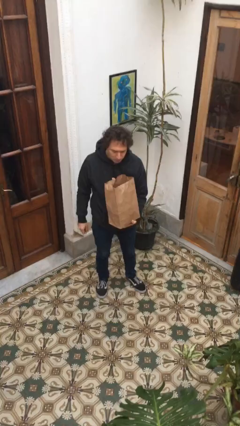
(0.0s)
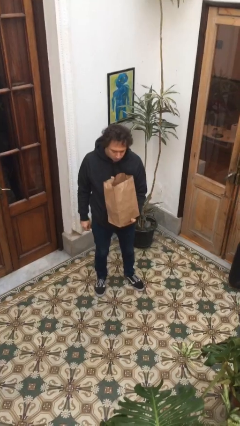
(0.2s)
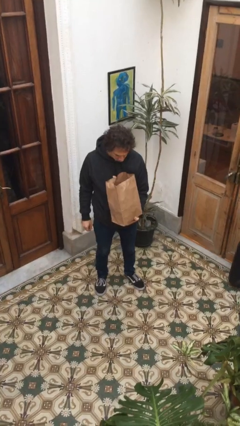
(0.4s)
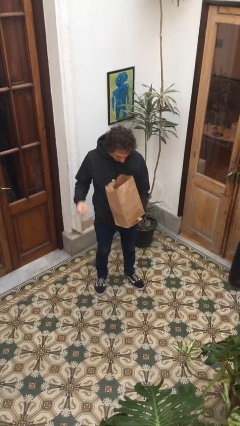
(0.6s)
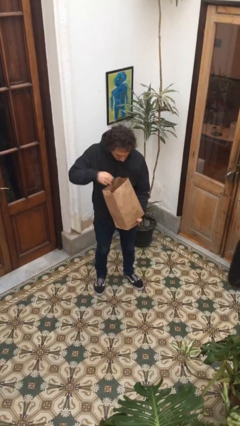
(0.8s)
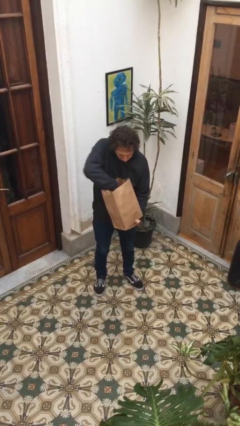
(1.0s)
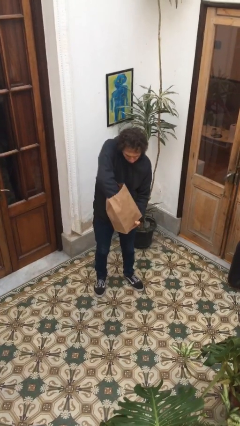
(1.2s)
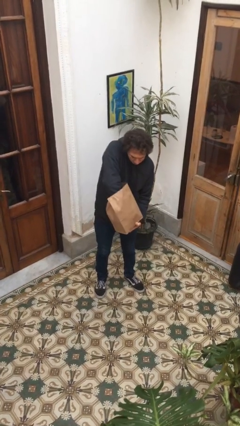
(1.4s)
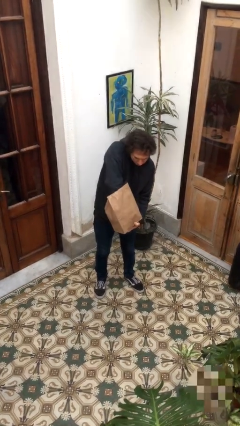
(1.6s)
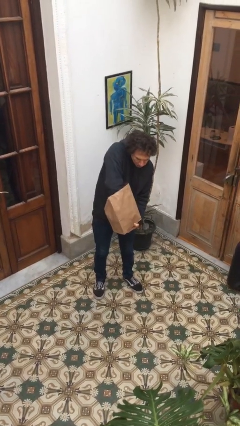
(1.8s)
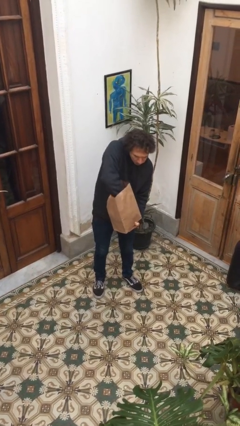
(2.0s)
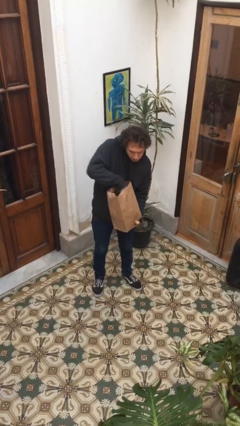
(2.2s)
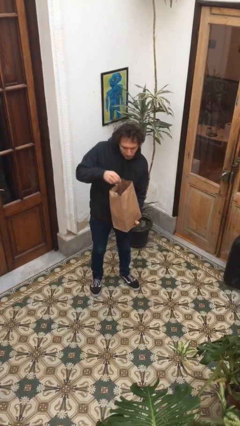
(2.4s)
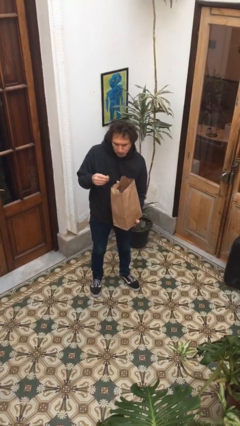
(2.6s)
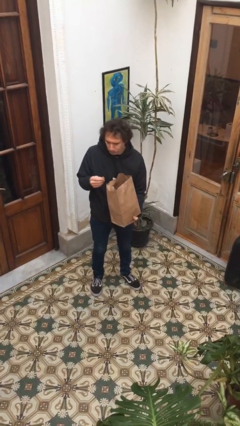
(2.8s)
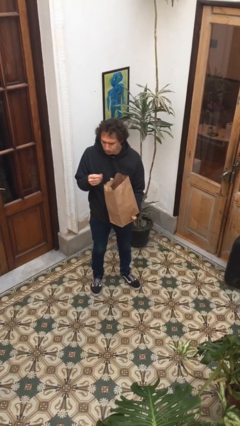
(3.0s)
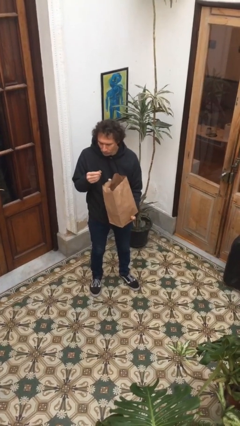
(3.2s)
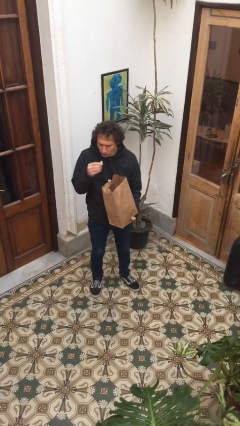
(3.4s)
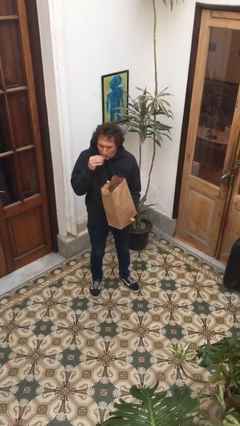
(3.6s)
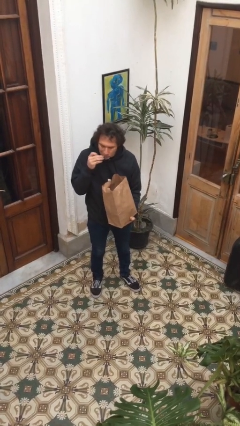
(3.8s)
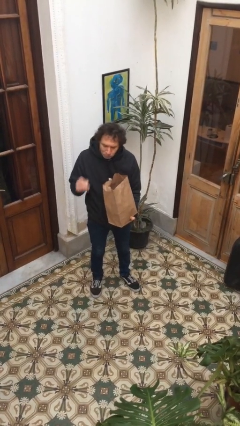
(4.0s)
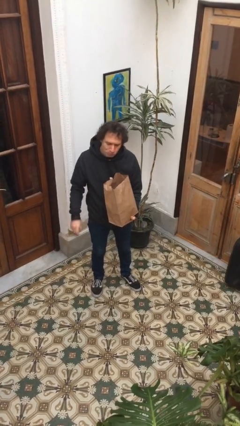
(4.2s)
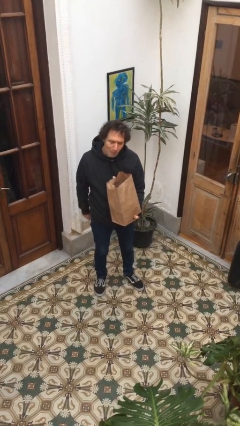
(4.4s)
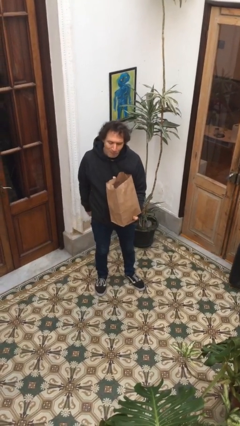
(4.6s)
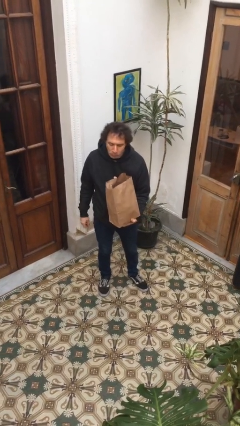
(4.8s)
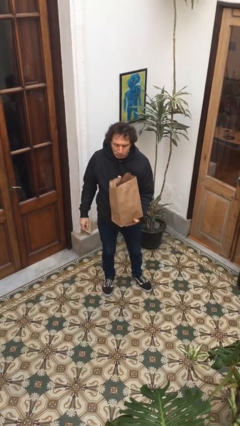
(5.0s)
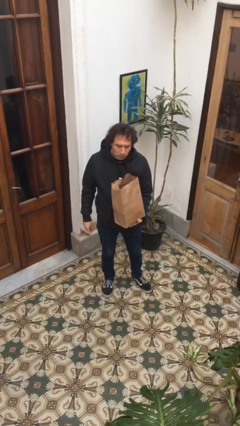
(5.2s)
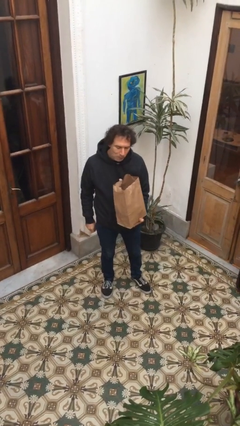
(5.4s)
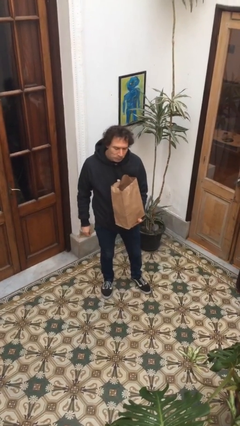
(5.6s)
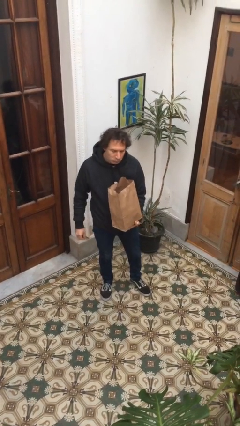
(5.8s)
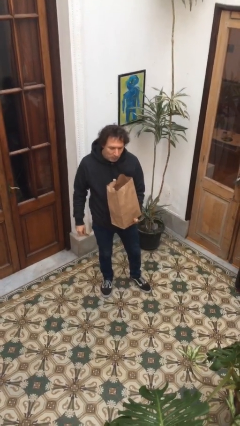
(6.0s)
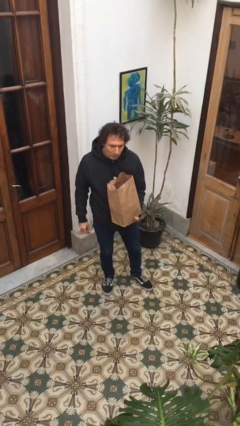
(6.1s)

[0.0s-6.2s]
person eats snack from bag

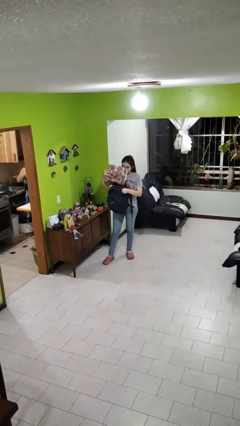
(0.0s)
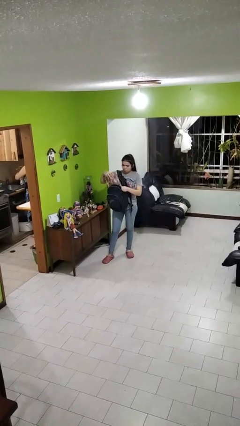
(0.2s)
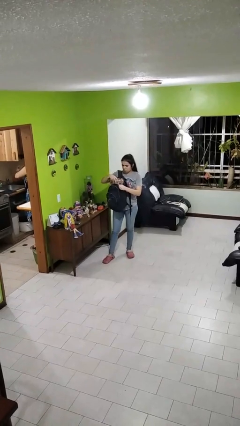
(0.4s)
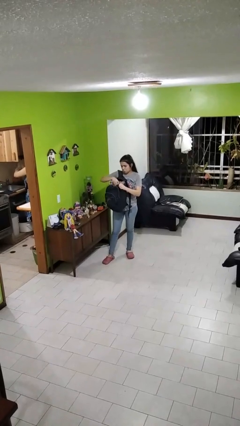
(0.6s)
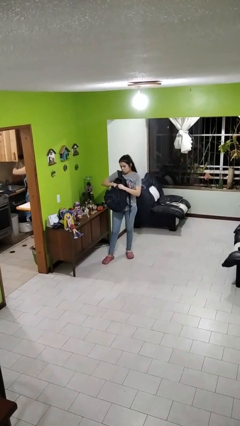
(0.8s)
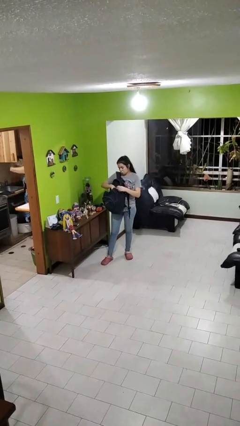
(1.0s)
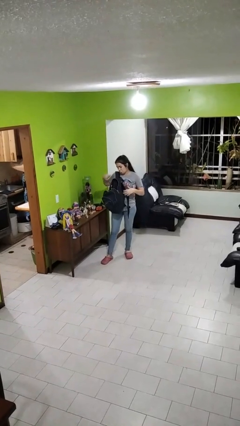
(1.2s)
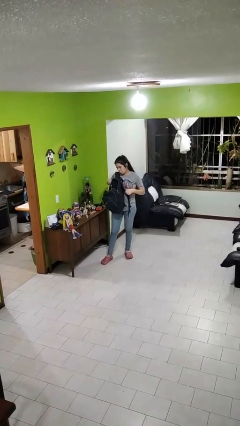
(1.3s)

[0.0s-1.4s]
person puts object into backpack

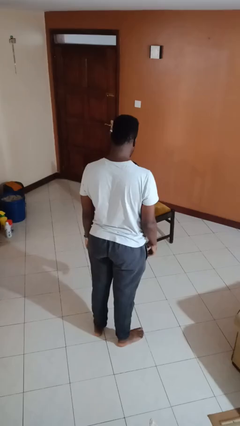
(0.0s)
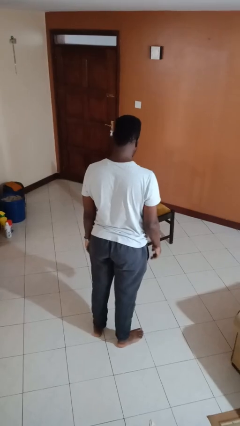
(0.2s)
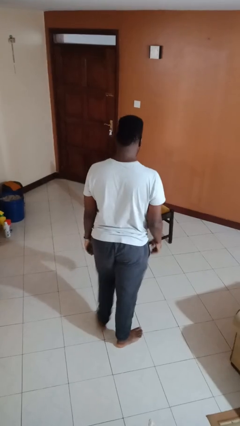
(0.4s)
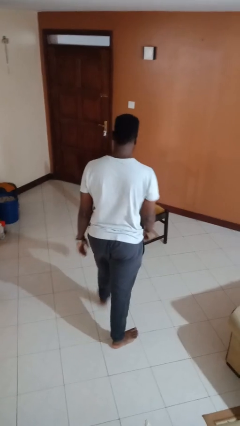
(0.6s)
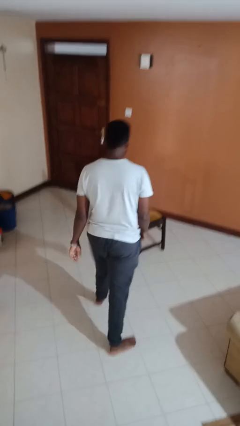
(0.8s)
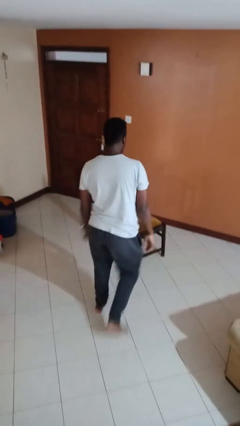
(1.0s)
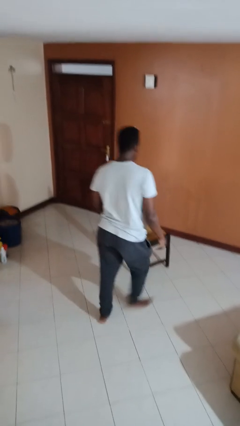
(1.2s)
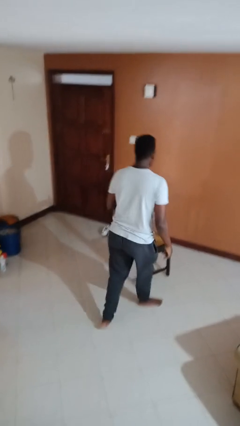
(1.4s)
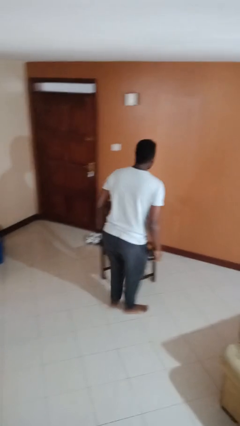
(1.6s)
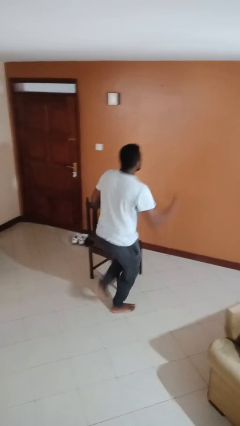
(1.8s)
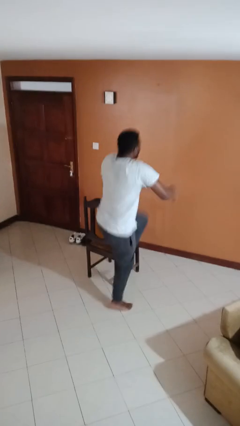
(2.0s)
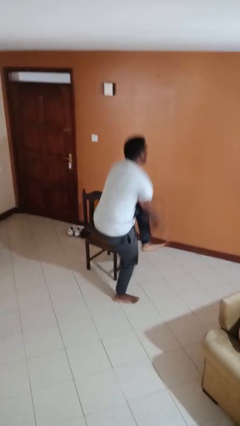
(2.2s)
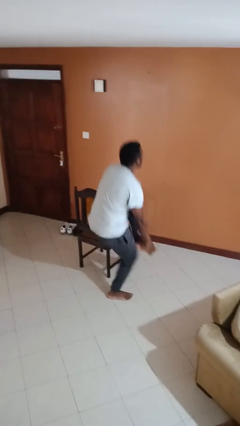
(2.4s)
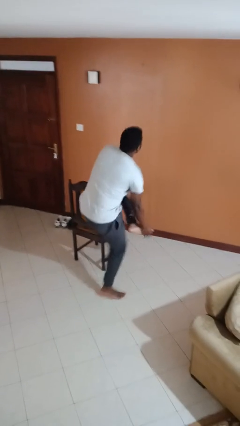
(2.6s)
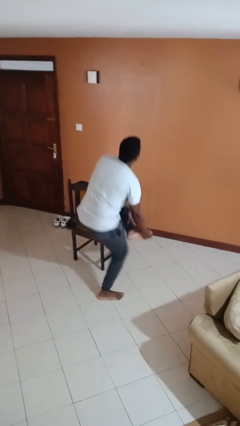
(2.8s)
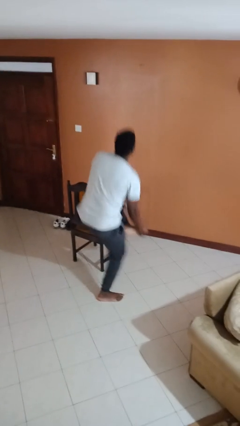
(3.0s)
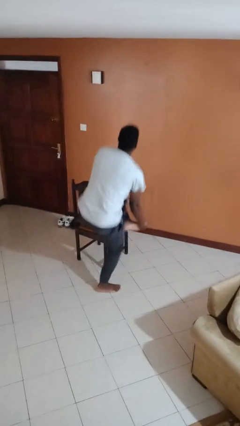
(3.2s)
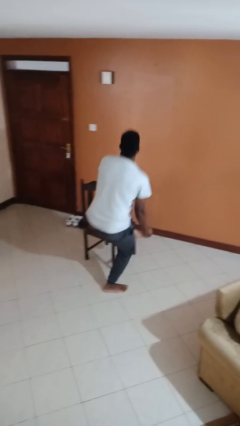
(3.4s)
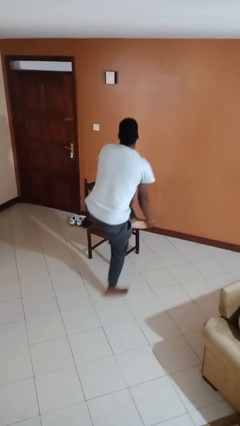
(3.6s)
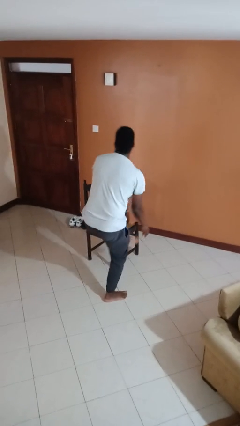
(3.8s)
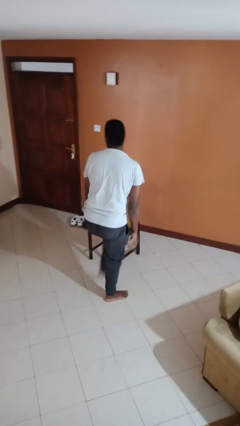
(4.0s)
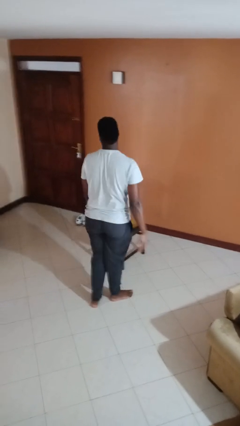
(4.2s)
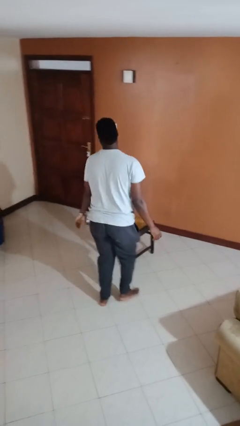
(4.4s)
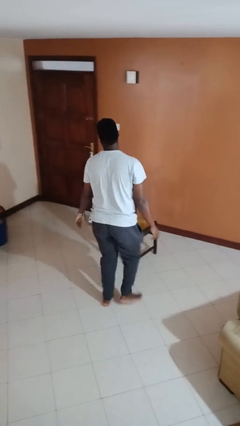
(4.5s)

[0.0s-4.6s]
person stubs toe

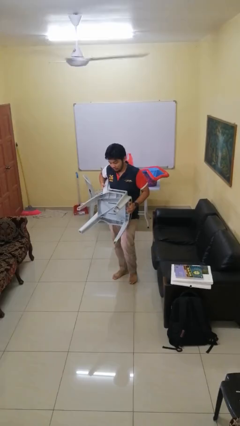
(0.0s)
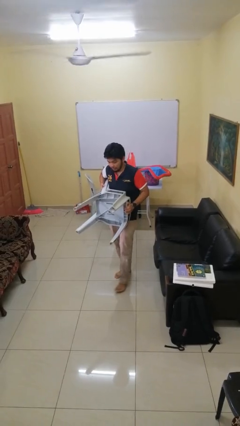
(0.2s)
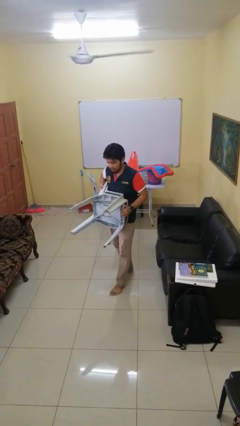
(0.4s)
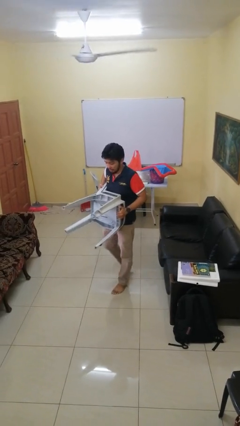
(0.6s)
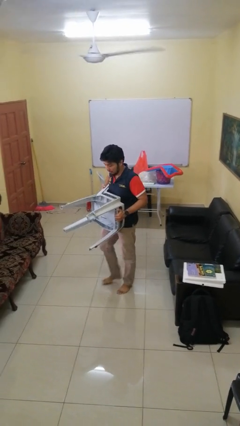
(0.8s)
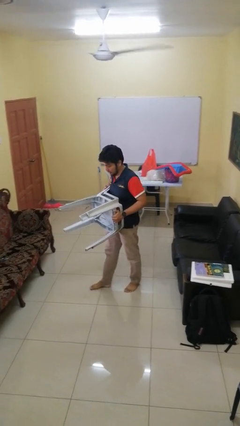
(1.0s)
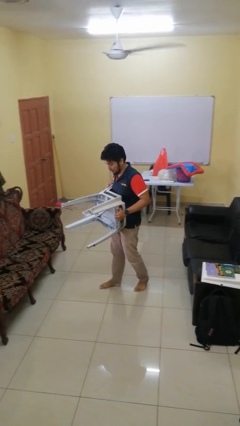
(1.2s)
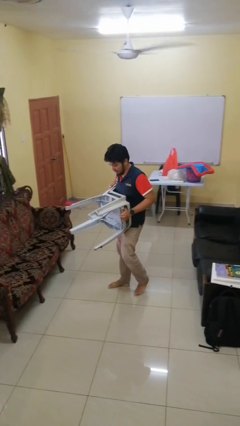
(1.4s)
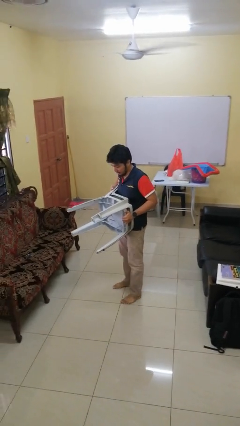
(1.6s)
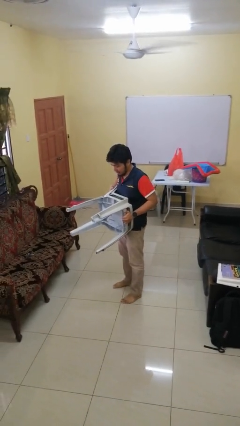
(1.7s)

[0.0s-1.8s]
person carries furniture

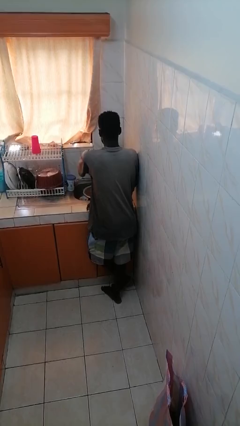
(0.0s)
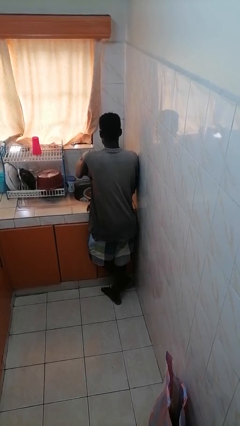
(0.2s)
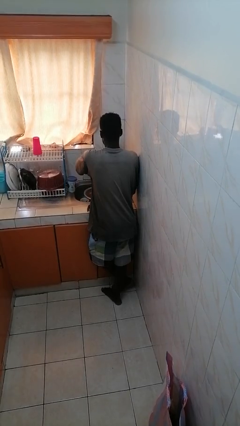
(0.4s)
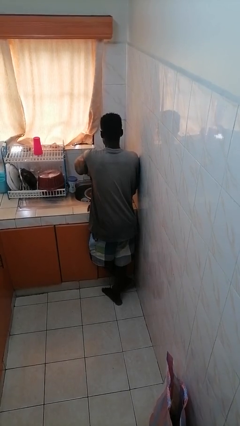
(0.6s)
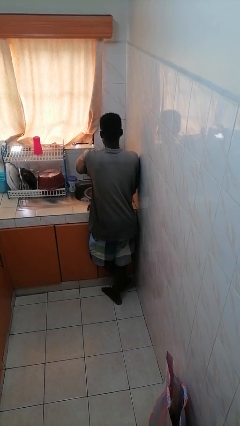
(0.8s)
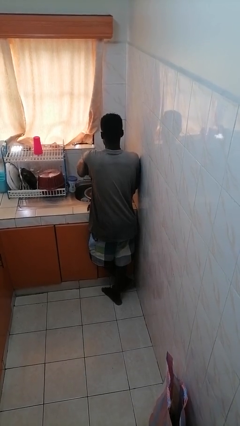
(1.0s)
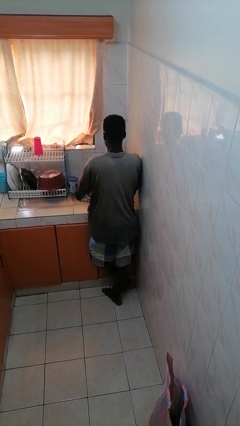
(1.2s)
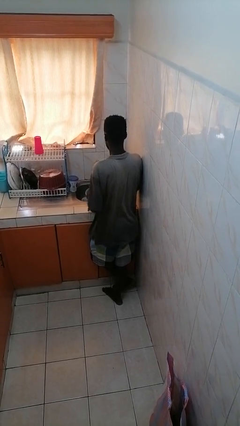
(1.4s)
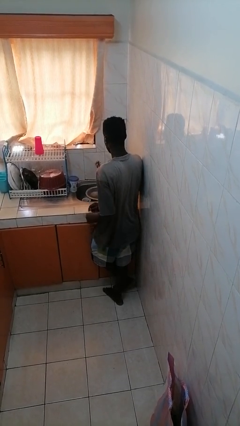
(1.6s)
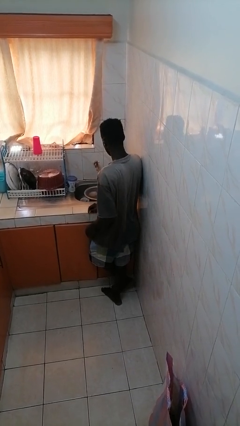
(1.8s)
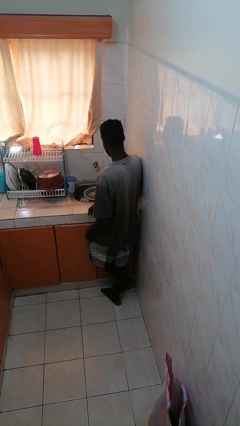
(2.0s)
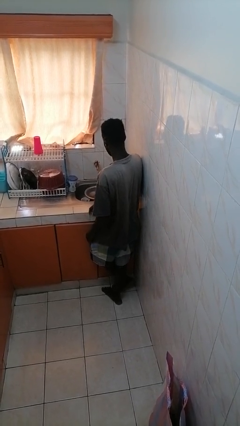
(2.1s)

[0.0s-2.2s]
person turns off faucet

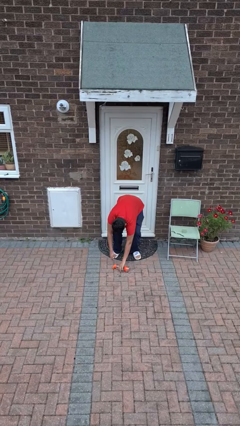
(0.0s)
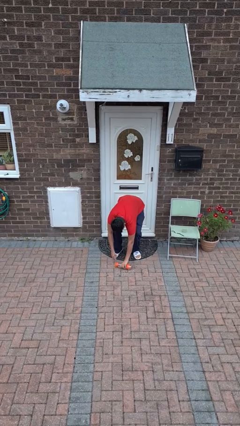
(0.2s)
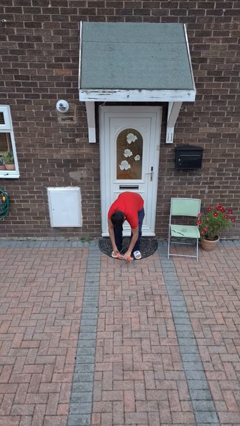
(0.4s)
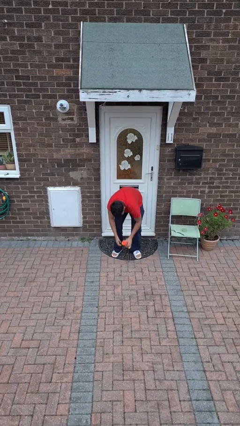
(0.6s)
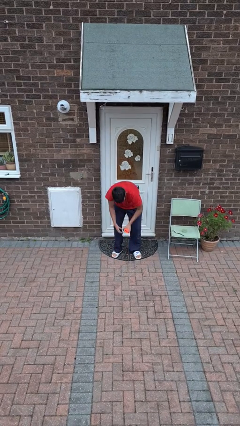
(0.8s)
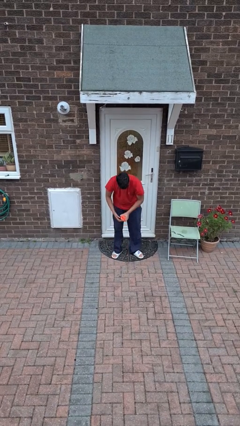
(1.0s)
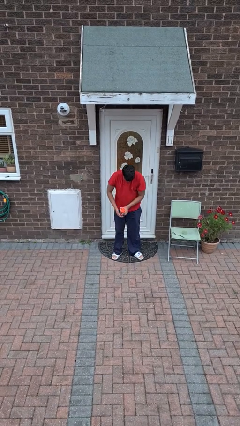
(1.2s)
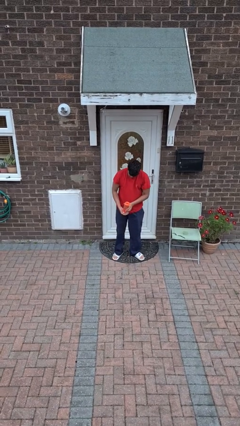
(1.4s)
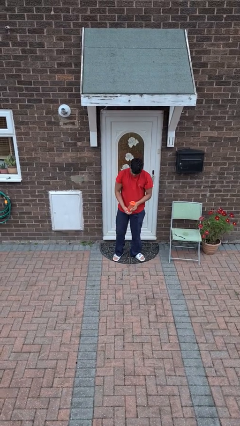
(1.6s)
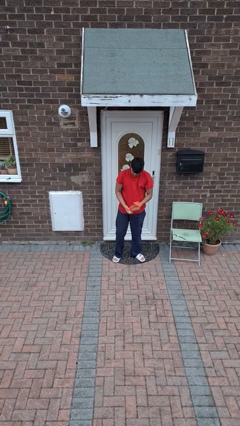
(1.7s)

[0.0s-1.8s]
person picks up object from floor
